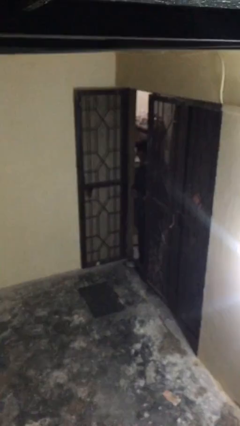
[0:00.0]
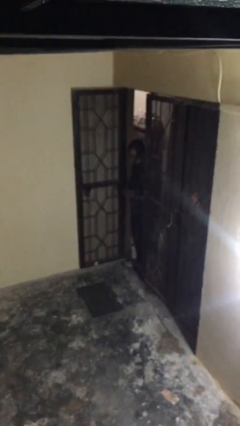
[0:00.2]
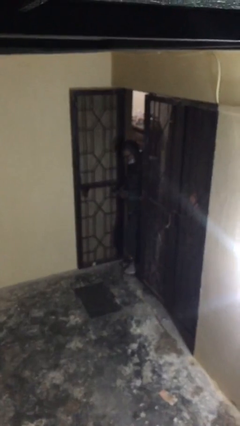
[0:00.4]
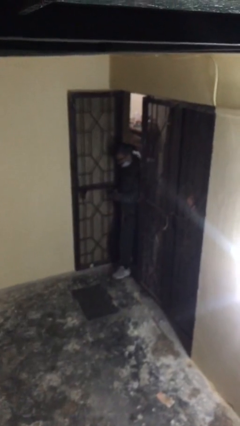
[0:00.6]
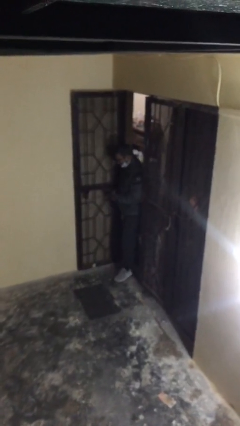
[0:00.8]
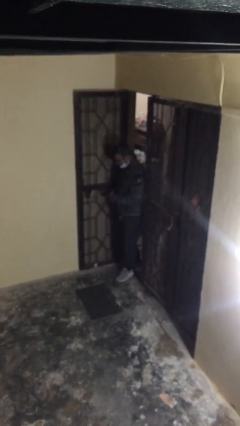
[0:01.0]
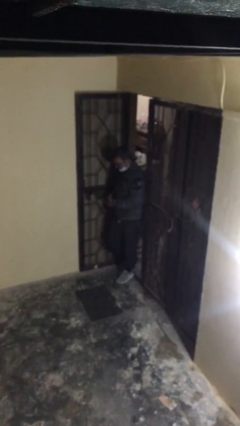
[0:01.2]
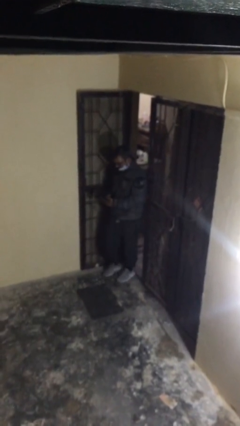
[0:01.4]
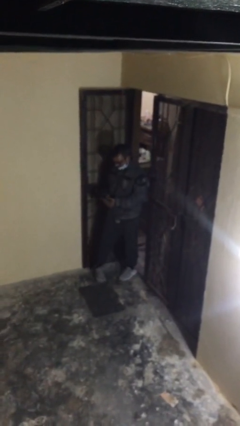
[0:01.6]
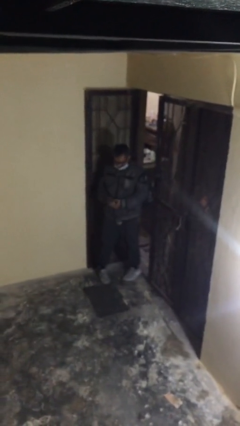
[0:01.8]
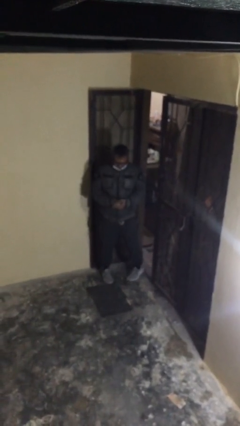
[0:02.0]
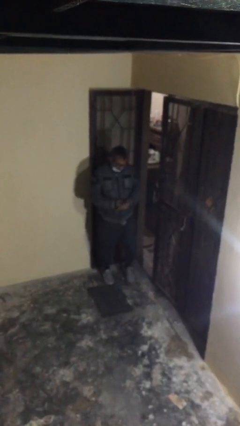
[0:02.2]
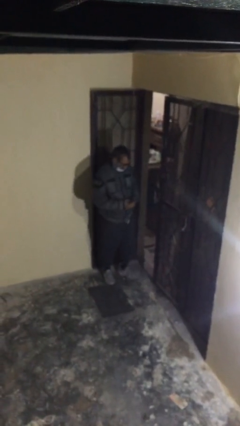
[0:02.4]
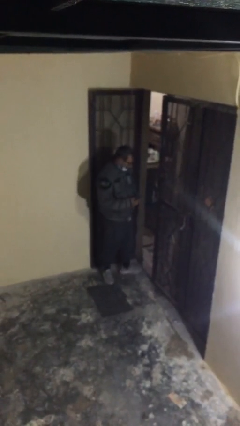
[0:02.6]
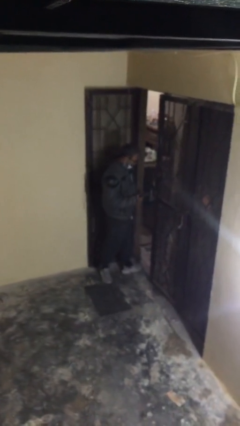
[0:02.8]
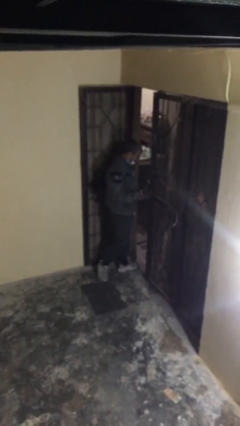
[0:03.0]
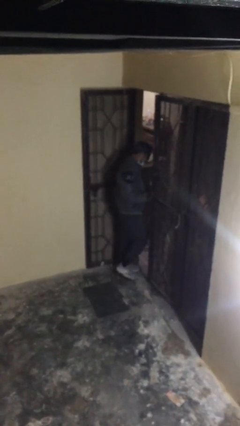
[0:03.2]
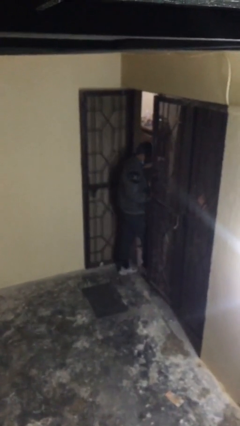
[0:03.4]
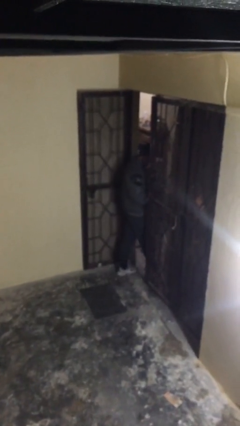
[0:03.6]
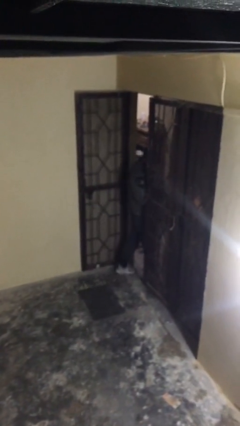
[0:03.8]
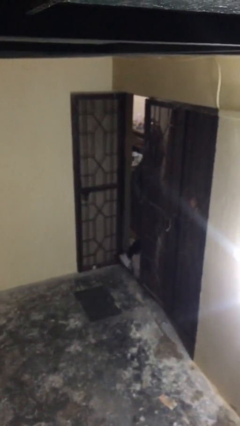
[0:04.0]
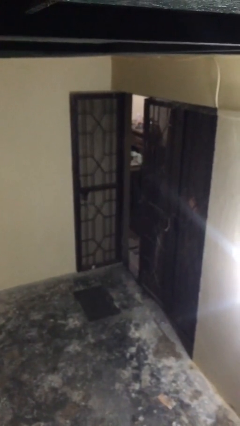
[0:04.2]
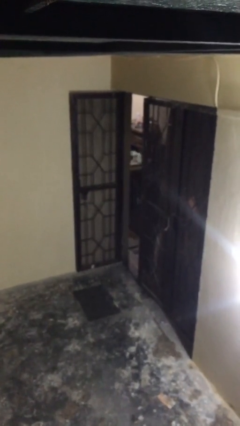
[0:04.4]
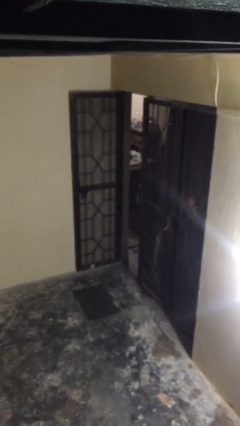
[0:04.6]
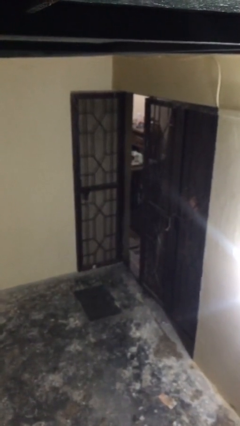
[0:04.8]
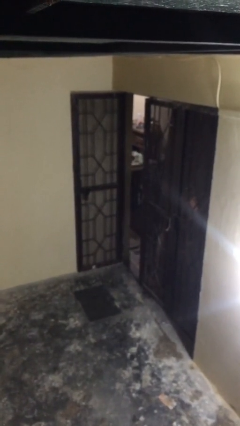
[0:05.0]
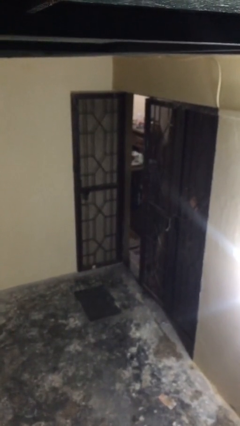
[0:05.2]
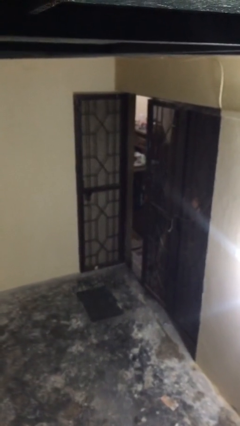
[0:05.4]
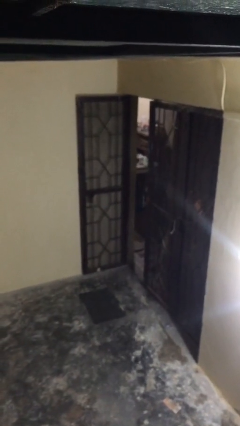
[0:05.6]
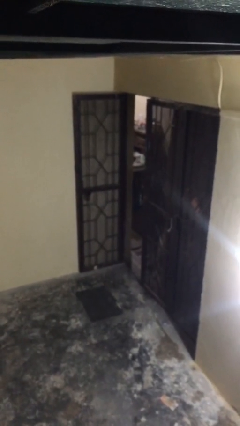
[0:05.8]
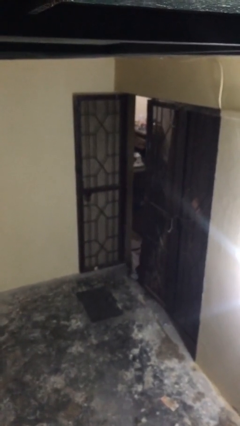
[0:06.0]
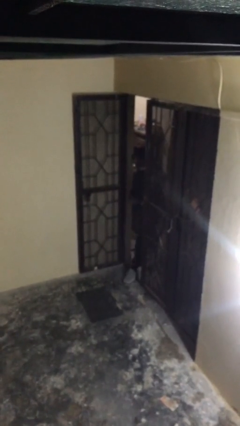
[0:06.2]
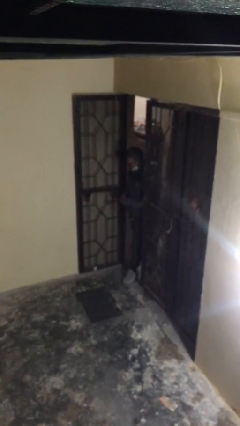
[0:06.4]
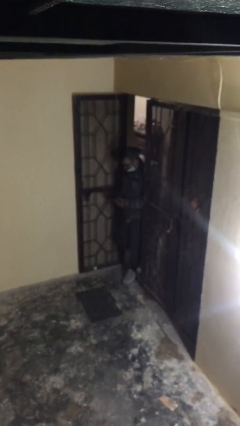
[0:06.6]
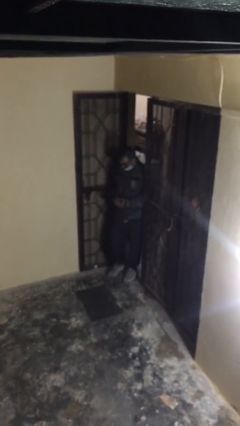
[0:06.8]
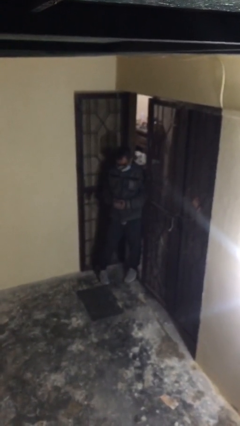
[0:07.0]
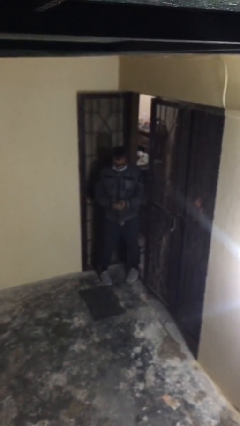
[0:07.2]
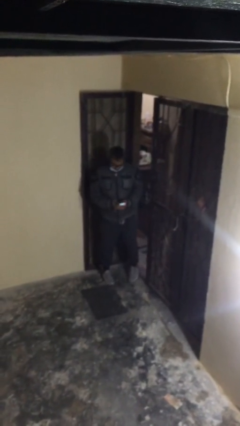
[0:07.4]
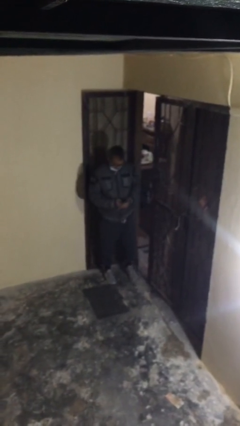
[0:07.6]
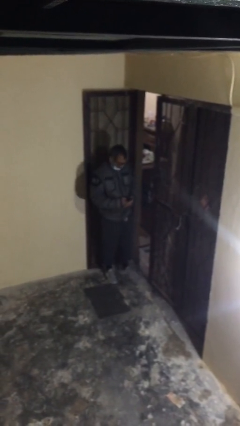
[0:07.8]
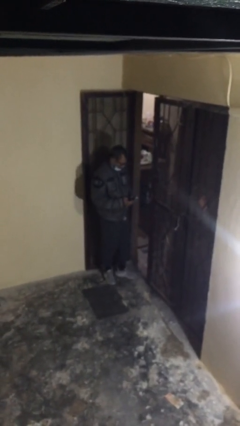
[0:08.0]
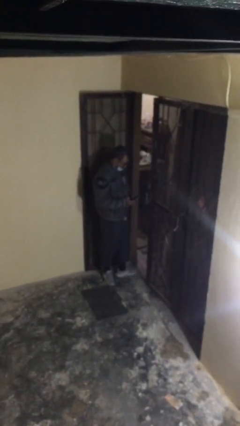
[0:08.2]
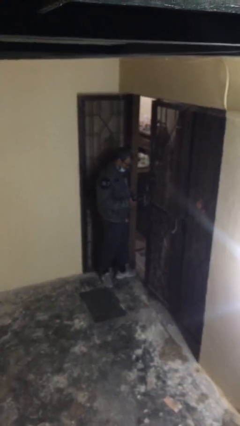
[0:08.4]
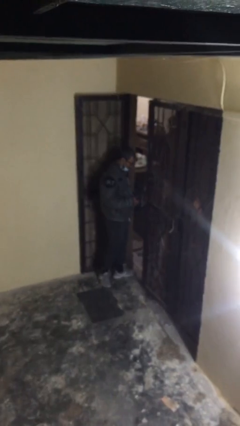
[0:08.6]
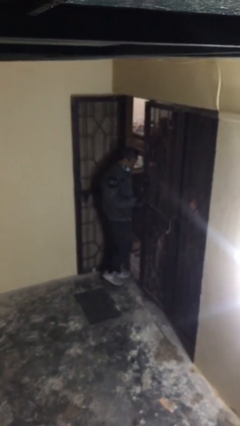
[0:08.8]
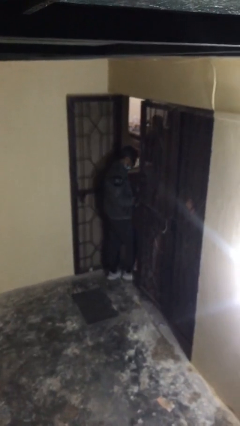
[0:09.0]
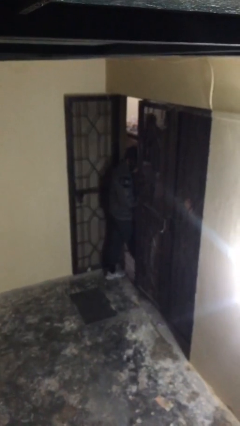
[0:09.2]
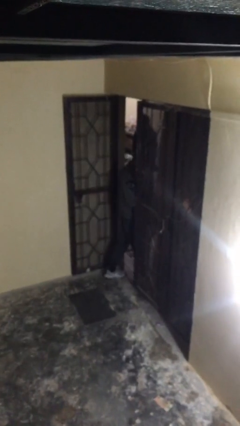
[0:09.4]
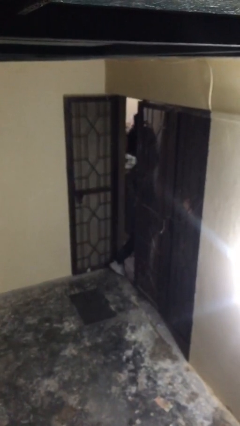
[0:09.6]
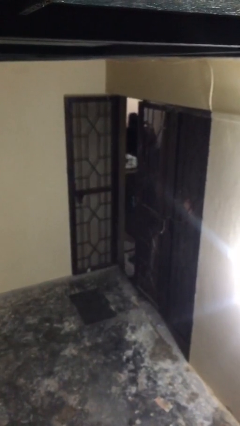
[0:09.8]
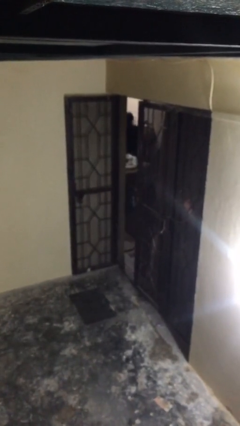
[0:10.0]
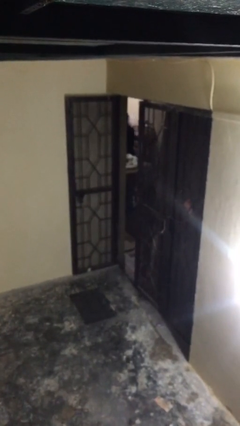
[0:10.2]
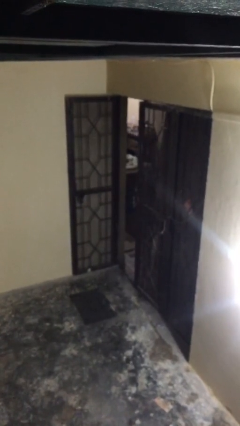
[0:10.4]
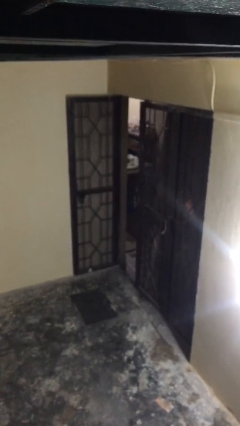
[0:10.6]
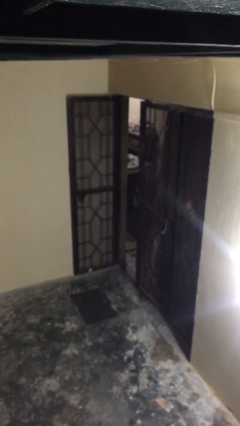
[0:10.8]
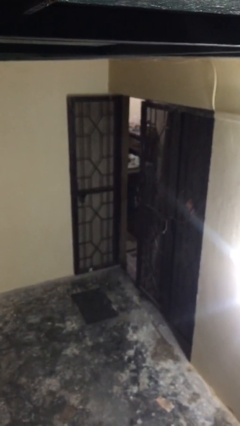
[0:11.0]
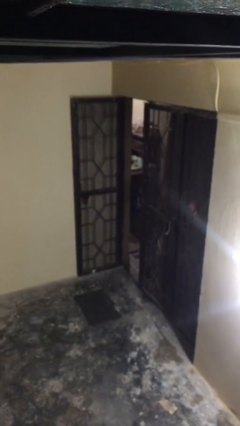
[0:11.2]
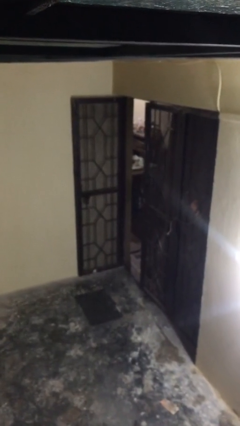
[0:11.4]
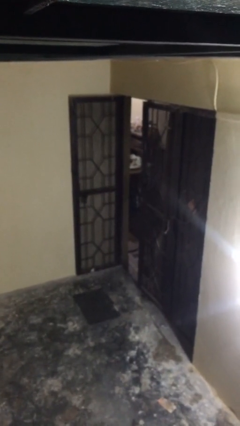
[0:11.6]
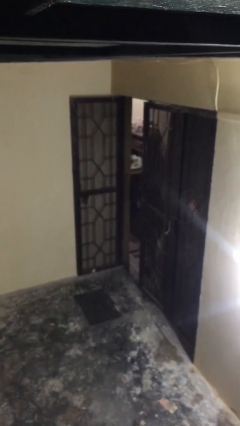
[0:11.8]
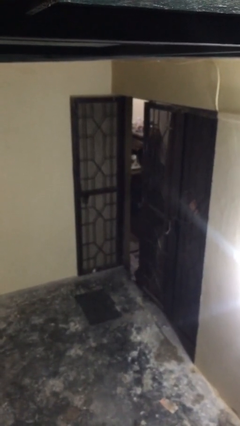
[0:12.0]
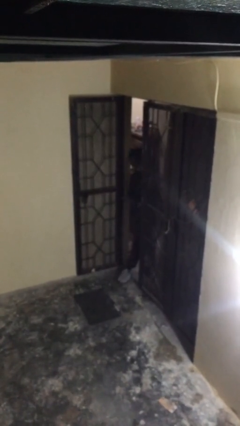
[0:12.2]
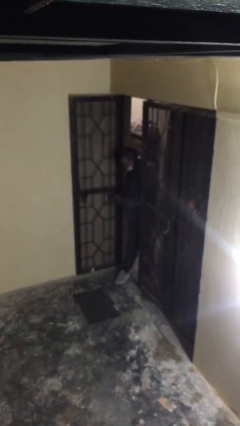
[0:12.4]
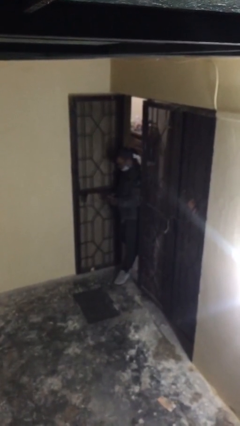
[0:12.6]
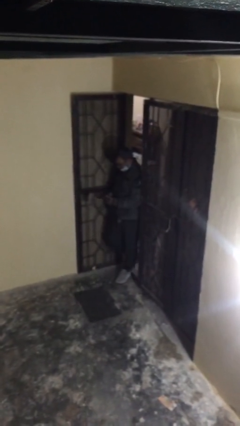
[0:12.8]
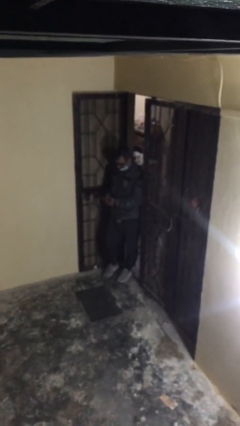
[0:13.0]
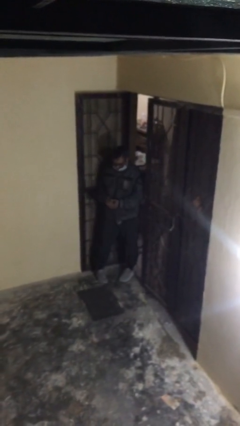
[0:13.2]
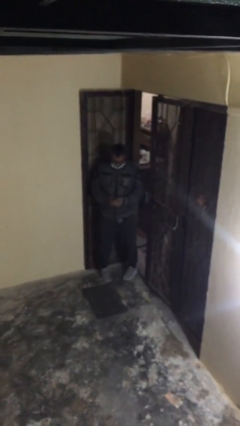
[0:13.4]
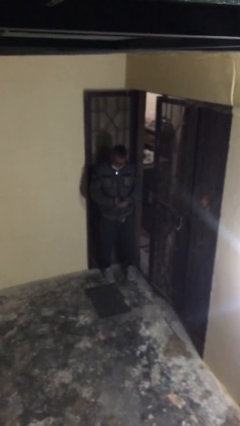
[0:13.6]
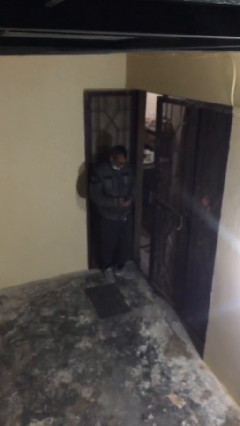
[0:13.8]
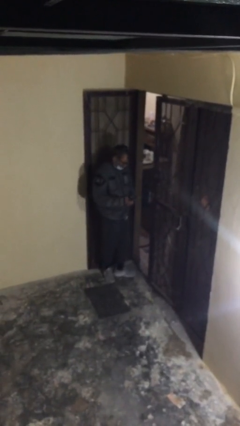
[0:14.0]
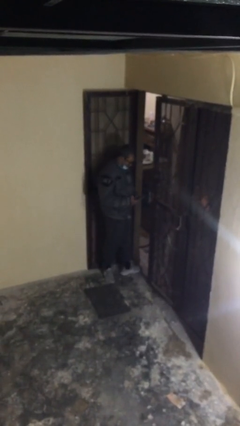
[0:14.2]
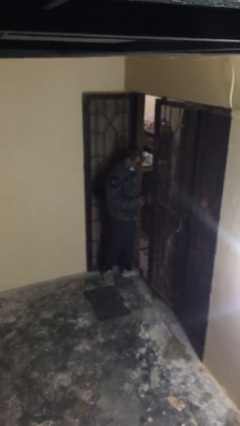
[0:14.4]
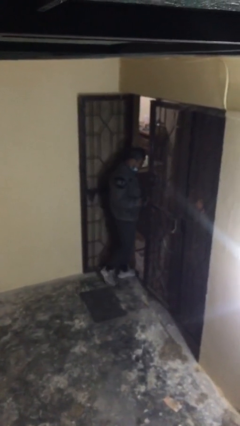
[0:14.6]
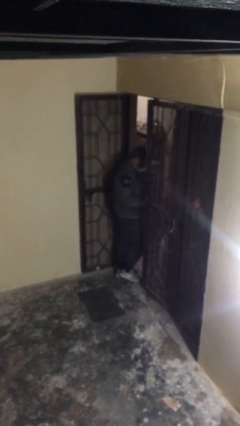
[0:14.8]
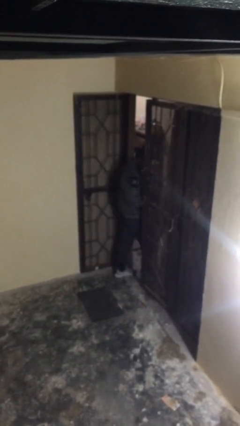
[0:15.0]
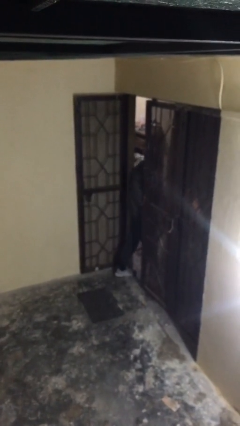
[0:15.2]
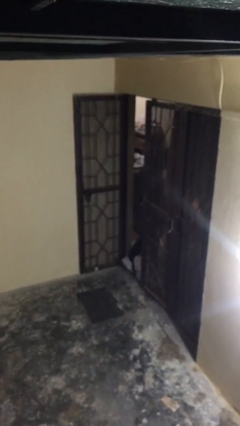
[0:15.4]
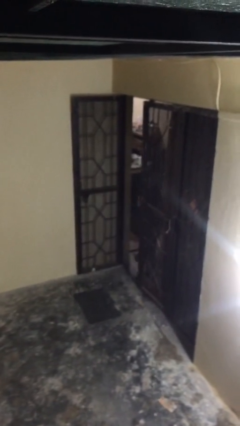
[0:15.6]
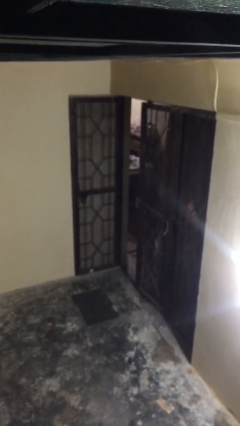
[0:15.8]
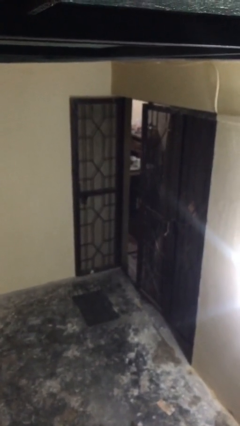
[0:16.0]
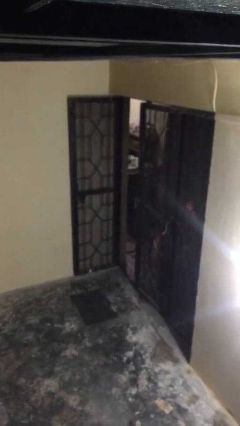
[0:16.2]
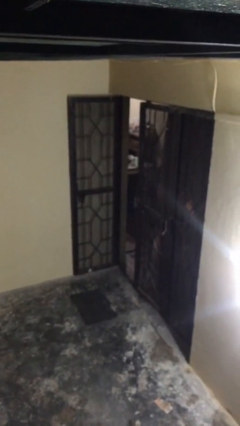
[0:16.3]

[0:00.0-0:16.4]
person texts on phone

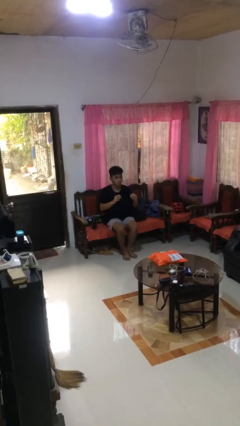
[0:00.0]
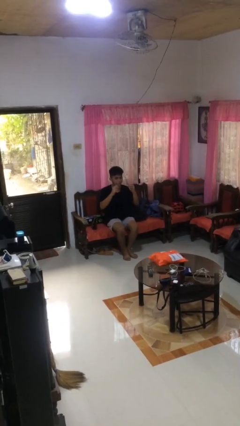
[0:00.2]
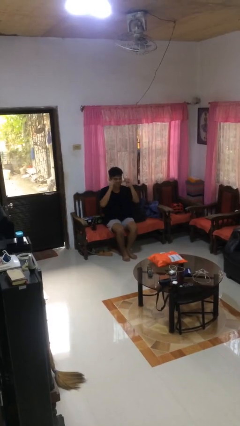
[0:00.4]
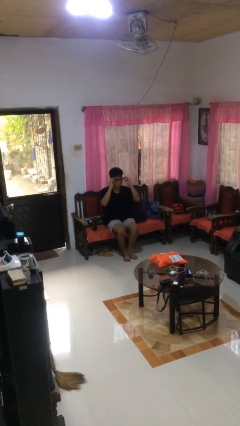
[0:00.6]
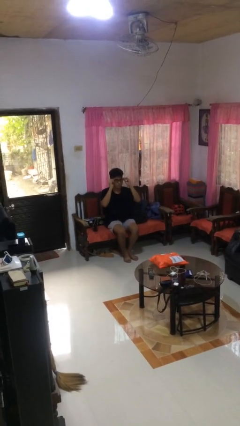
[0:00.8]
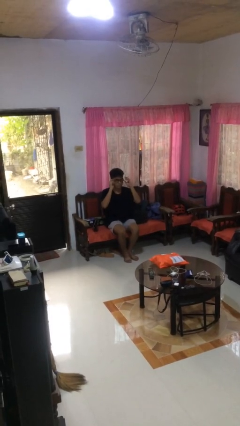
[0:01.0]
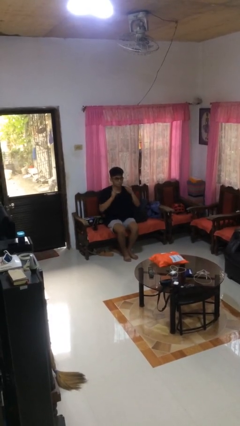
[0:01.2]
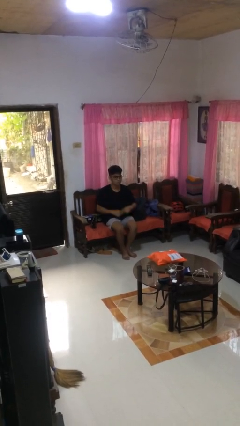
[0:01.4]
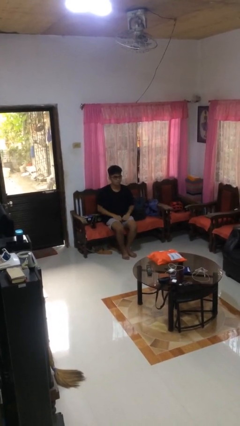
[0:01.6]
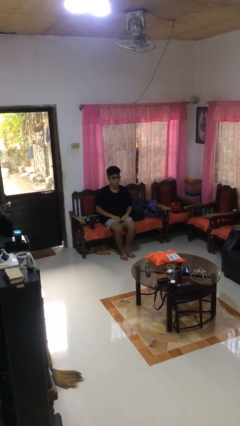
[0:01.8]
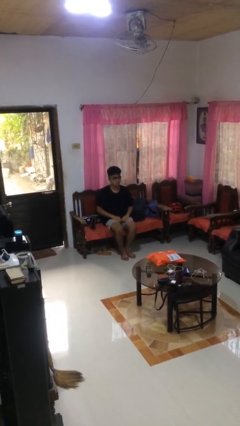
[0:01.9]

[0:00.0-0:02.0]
person puts on glasses
